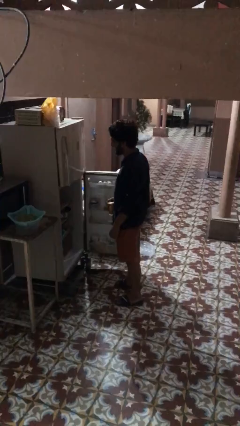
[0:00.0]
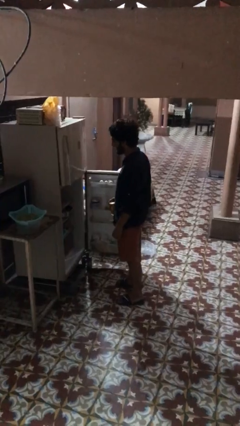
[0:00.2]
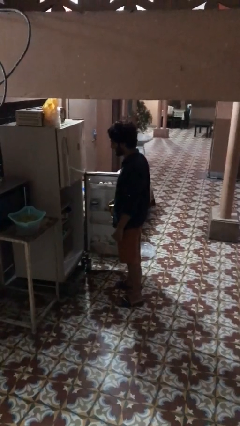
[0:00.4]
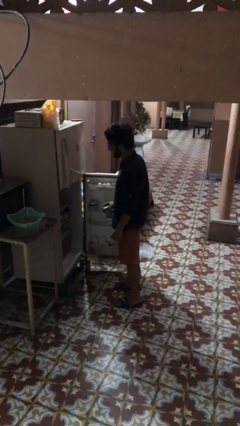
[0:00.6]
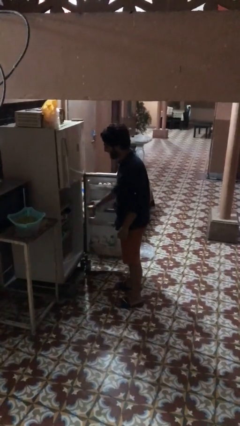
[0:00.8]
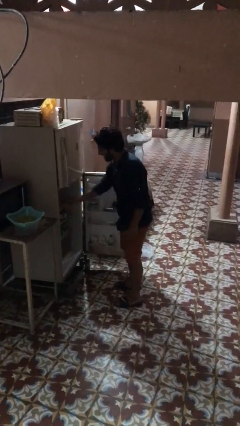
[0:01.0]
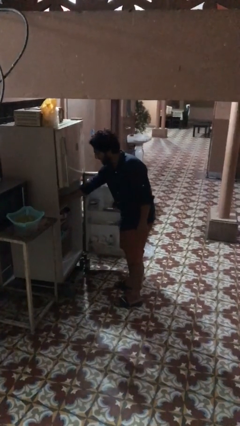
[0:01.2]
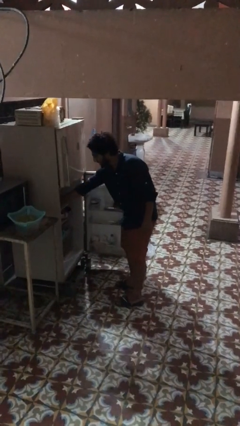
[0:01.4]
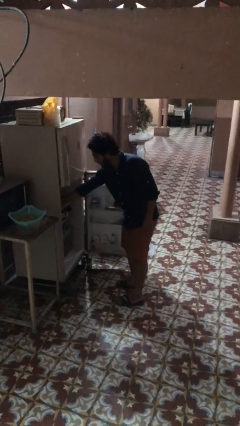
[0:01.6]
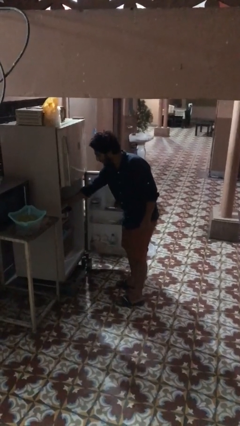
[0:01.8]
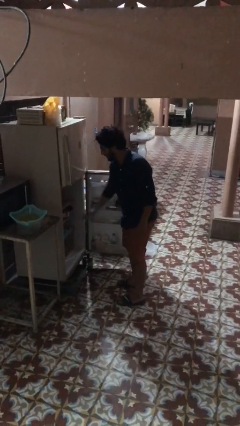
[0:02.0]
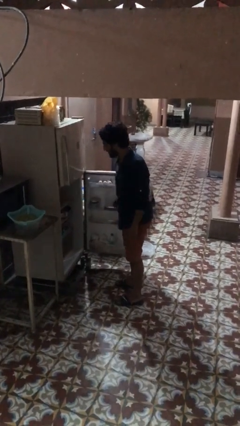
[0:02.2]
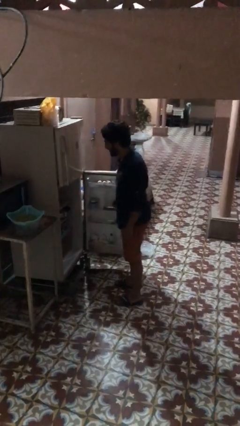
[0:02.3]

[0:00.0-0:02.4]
person puts object into refrigerator

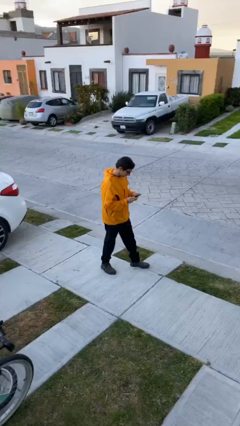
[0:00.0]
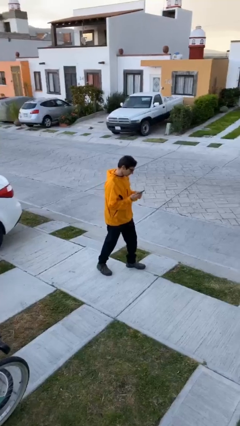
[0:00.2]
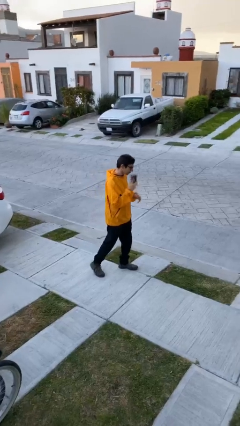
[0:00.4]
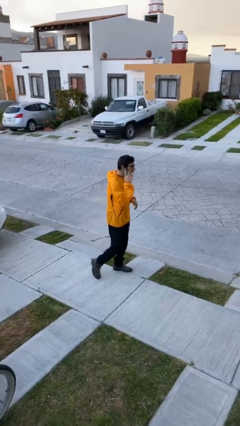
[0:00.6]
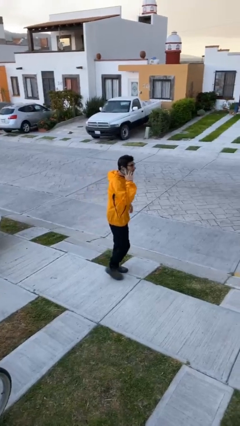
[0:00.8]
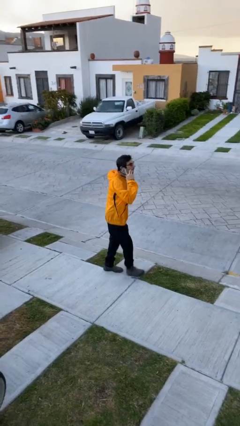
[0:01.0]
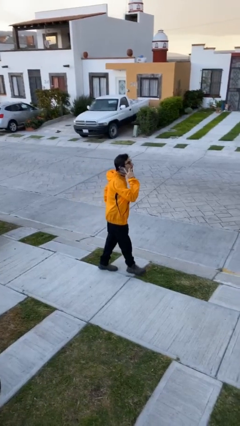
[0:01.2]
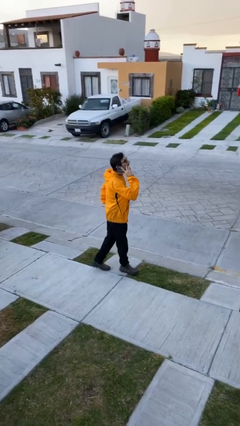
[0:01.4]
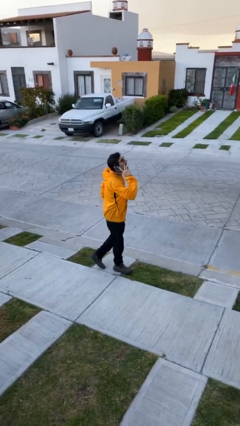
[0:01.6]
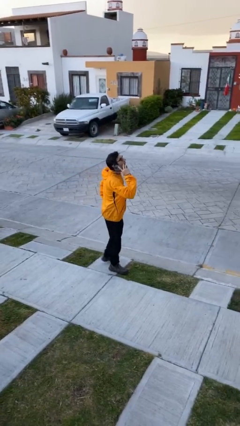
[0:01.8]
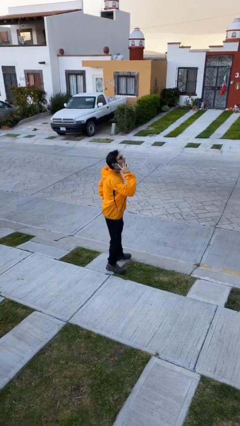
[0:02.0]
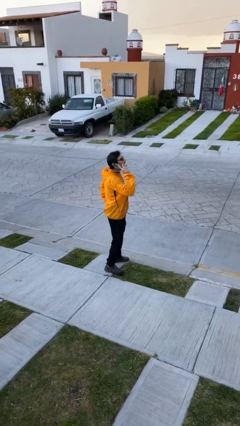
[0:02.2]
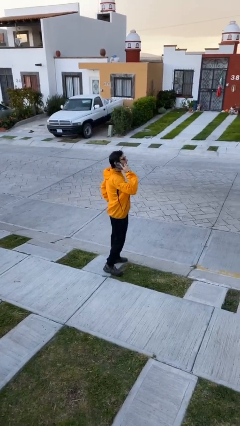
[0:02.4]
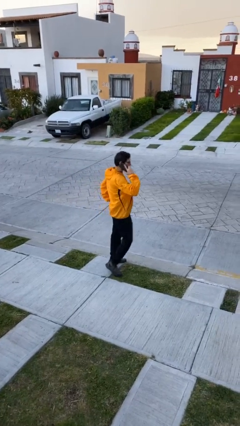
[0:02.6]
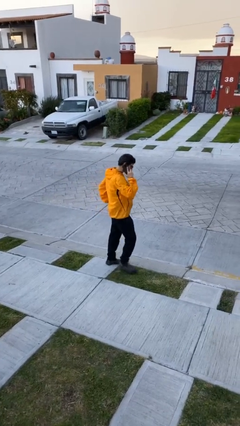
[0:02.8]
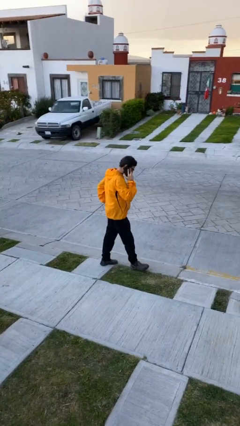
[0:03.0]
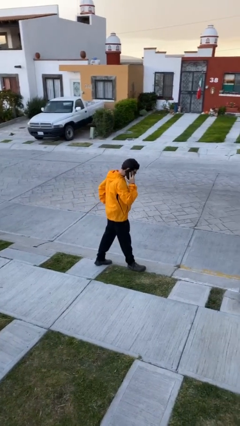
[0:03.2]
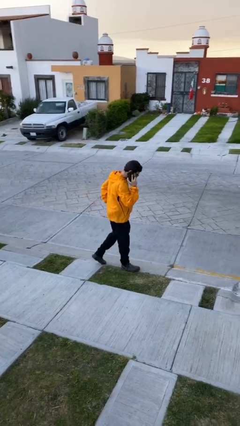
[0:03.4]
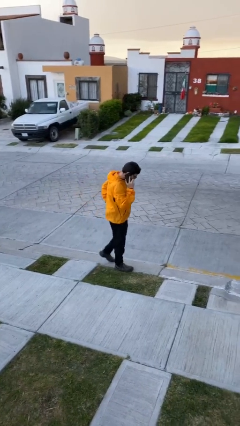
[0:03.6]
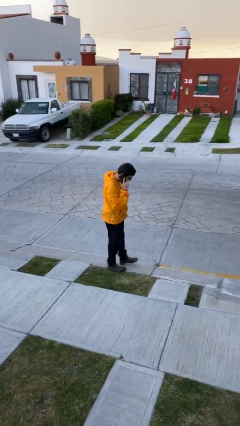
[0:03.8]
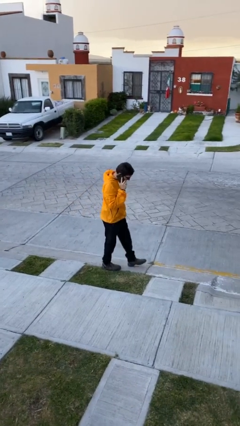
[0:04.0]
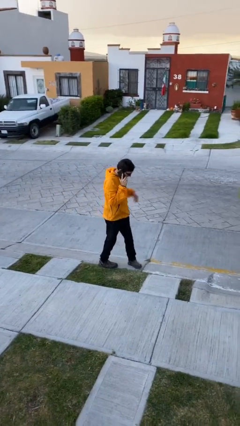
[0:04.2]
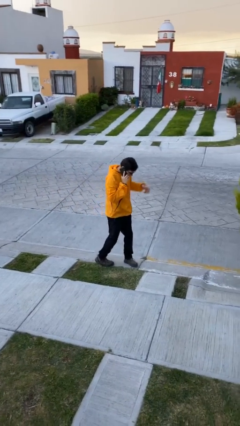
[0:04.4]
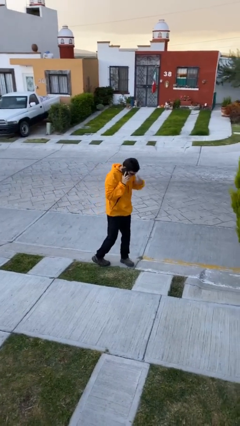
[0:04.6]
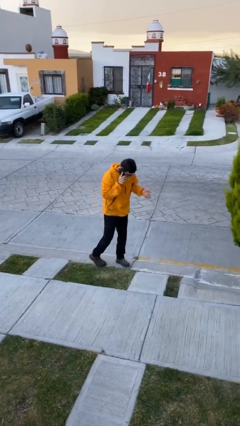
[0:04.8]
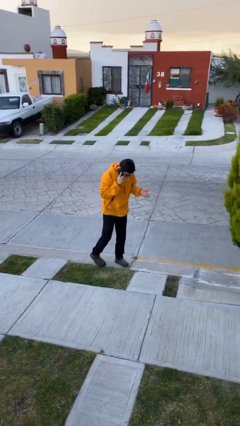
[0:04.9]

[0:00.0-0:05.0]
person talks on phone

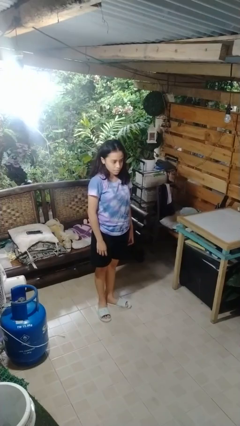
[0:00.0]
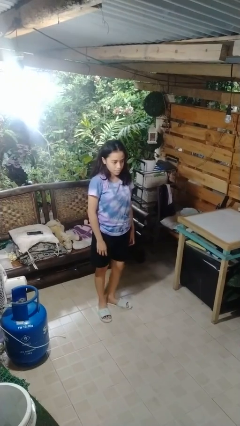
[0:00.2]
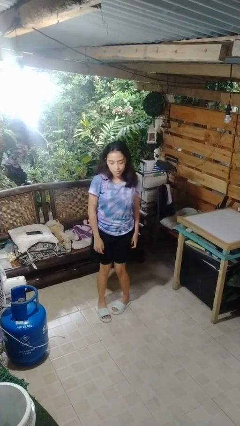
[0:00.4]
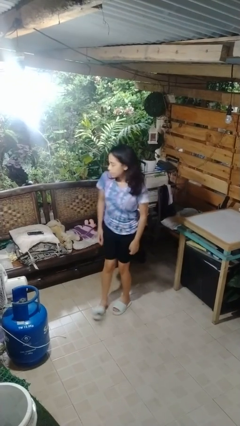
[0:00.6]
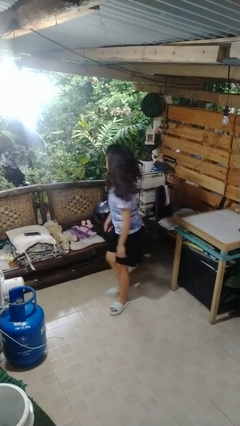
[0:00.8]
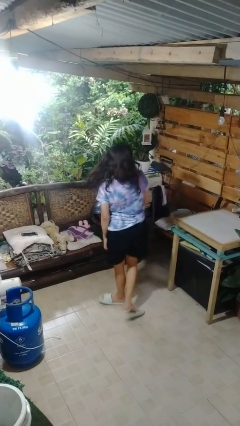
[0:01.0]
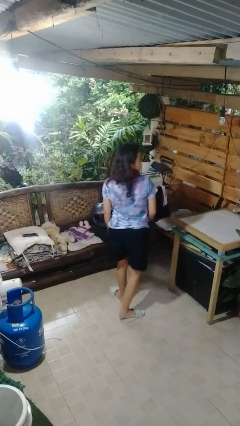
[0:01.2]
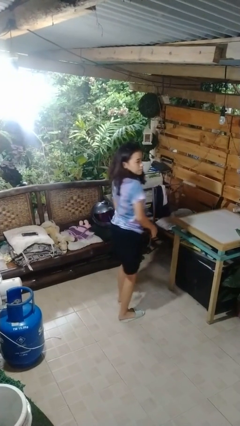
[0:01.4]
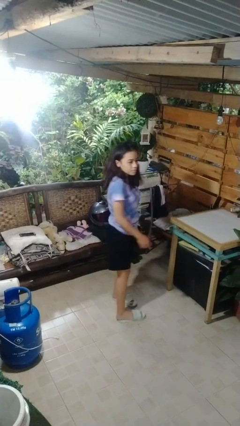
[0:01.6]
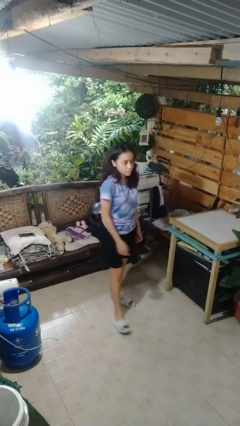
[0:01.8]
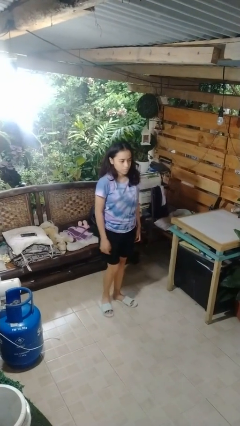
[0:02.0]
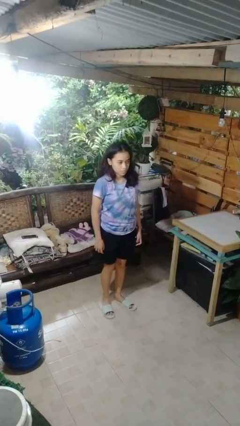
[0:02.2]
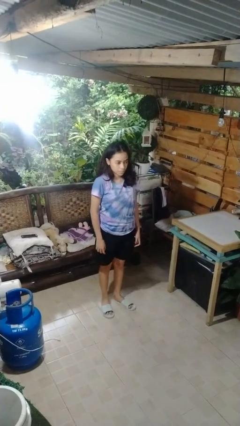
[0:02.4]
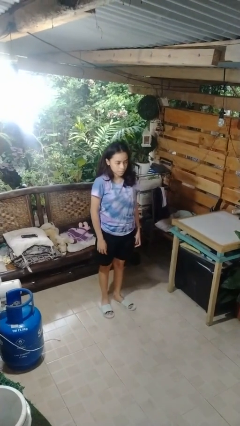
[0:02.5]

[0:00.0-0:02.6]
person twirls

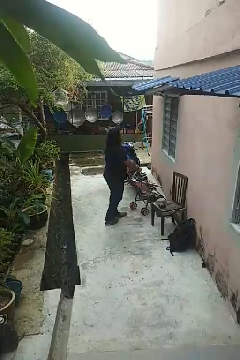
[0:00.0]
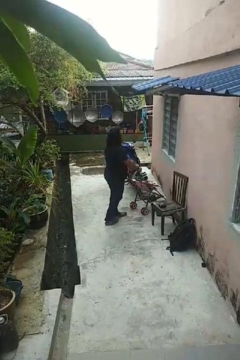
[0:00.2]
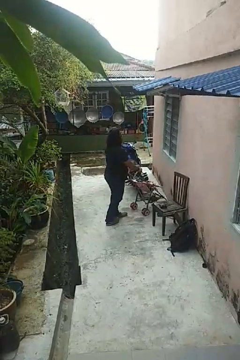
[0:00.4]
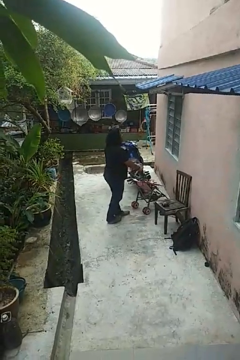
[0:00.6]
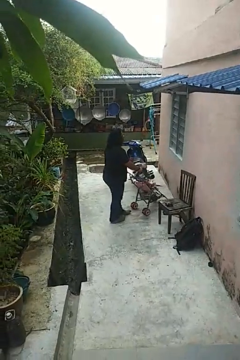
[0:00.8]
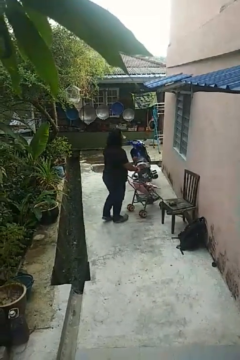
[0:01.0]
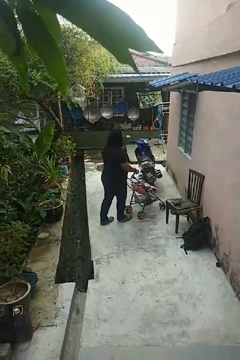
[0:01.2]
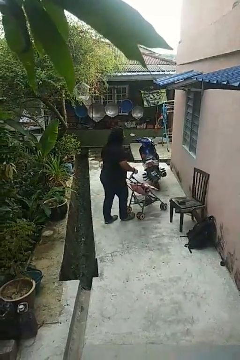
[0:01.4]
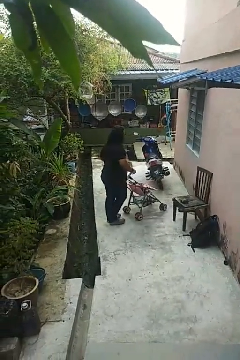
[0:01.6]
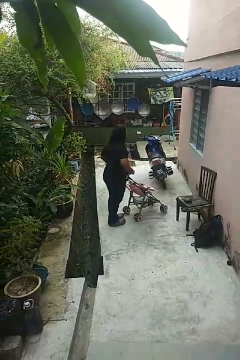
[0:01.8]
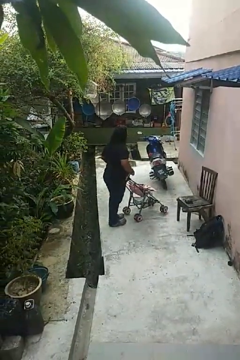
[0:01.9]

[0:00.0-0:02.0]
person pulls wheeled cart

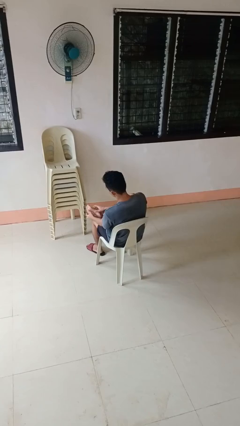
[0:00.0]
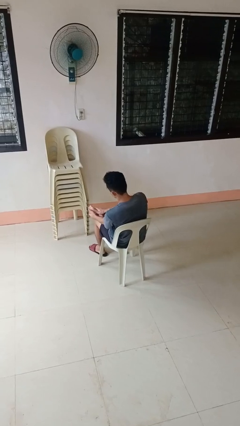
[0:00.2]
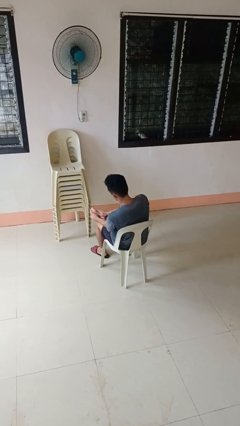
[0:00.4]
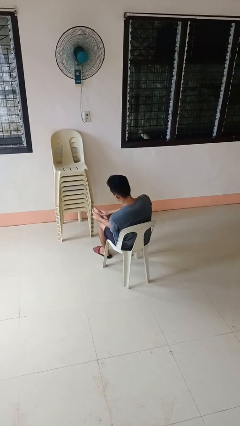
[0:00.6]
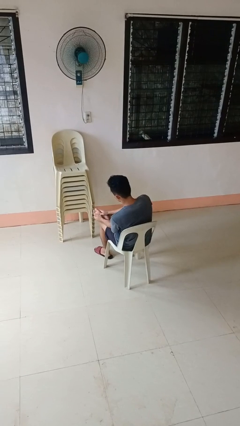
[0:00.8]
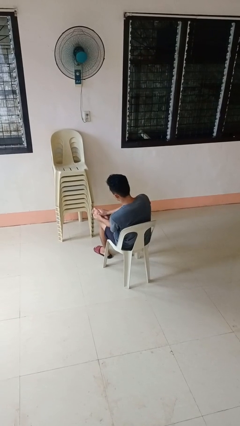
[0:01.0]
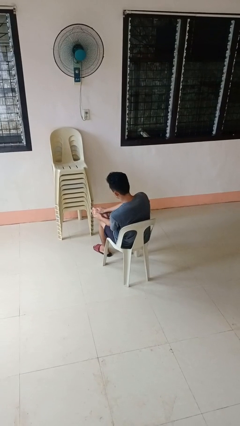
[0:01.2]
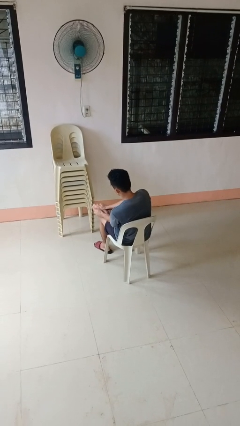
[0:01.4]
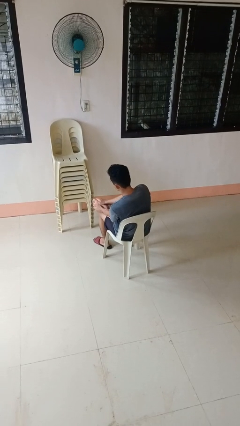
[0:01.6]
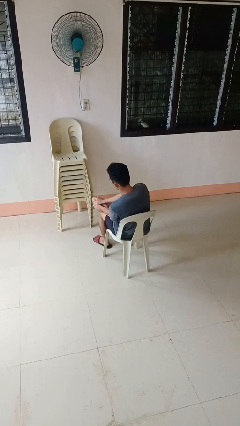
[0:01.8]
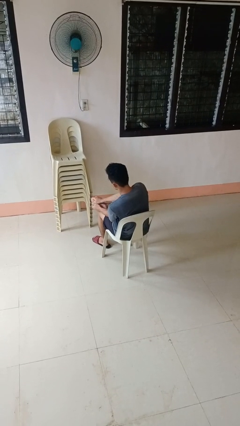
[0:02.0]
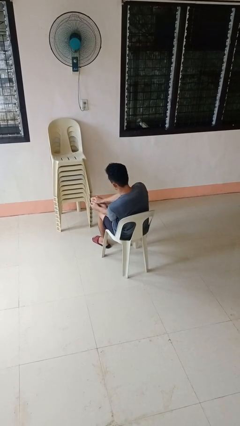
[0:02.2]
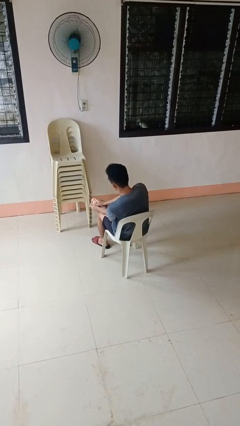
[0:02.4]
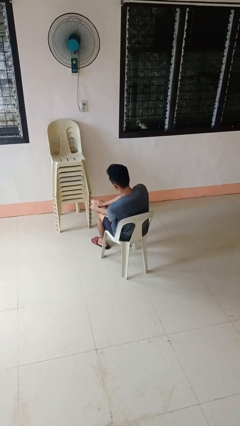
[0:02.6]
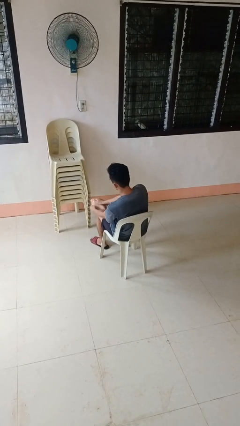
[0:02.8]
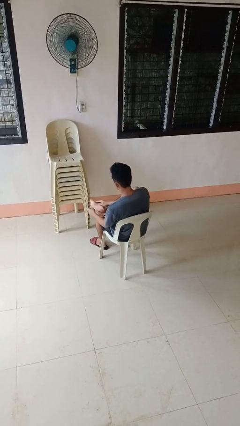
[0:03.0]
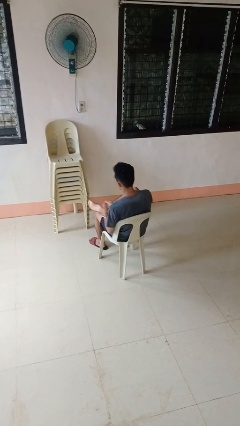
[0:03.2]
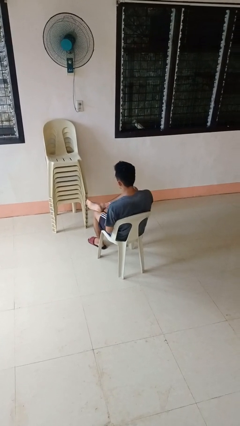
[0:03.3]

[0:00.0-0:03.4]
person rubs foot

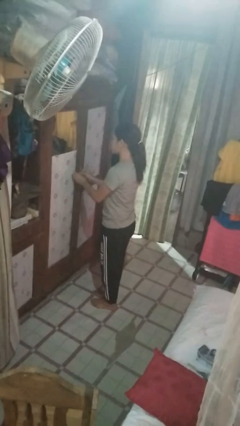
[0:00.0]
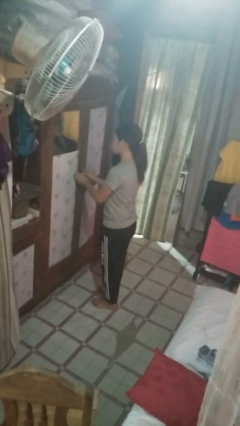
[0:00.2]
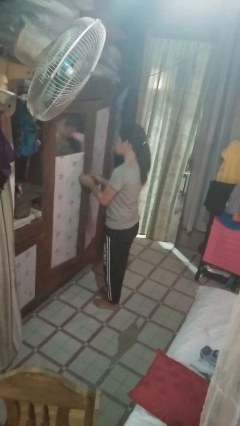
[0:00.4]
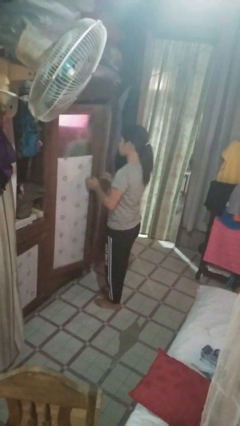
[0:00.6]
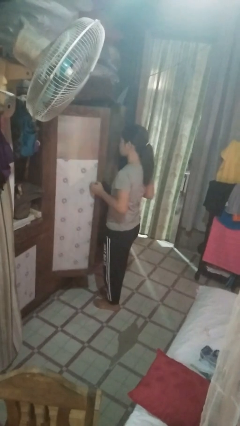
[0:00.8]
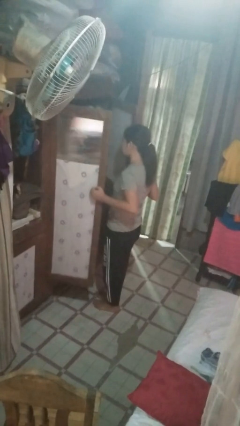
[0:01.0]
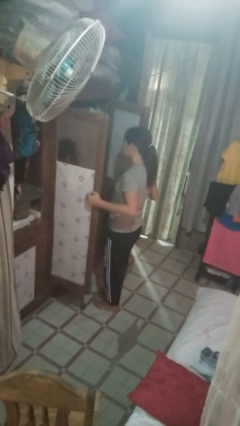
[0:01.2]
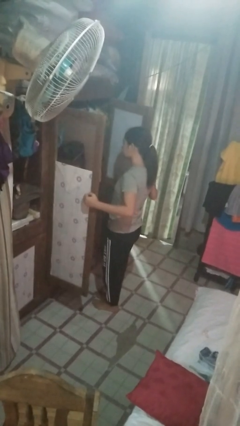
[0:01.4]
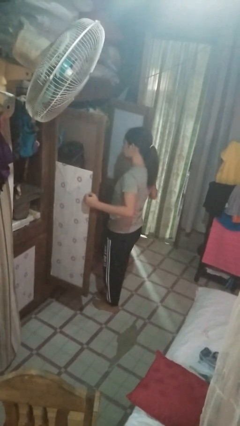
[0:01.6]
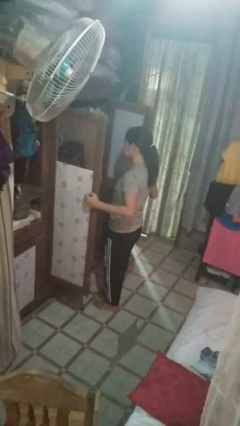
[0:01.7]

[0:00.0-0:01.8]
person opens closet door

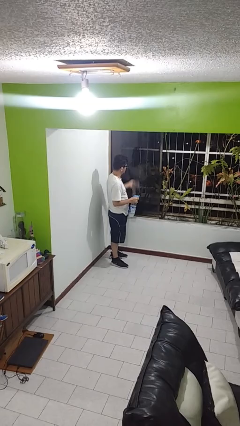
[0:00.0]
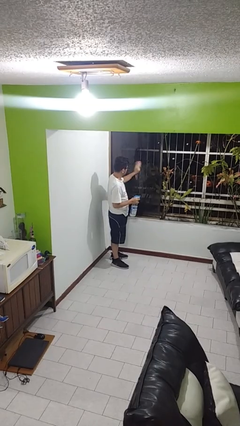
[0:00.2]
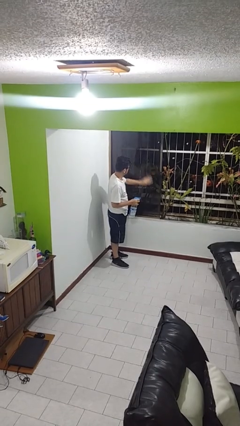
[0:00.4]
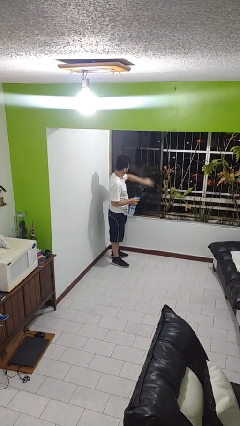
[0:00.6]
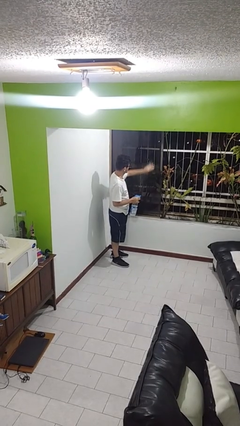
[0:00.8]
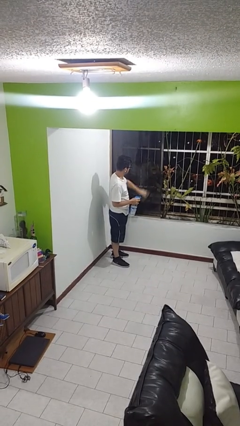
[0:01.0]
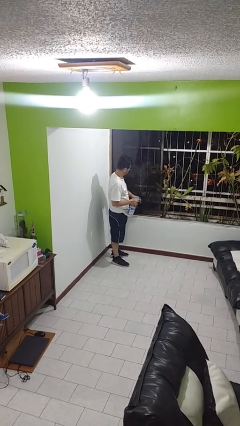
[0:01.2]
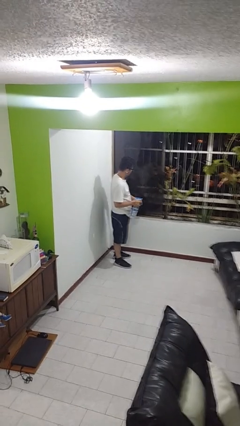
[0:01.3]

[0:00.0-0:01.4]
person washes window
